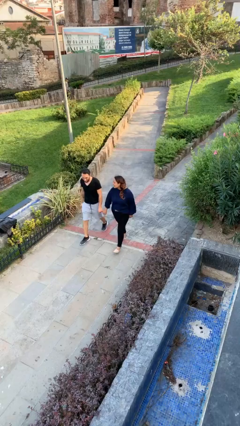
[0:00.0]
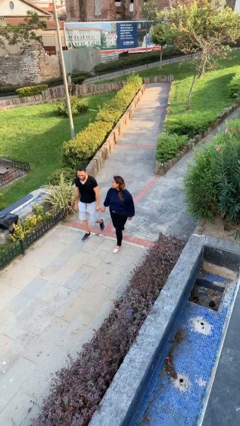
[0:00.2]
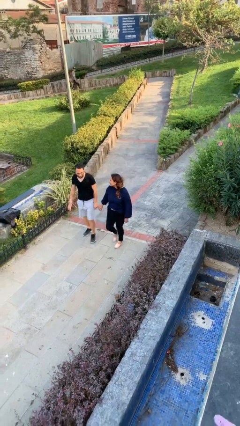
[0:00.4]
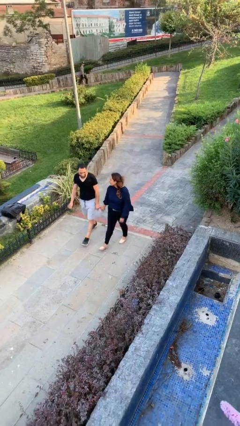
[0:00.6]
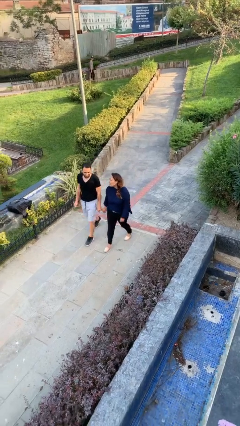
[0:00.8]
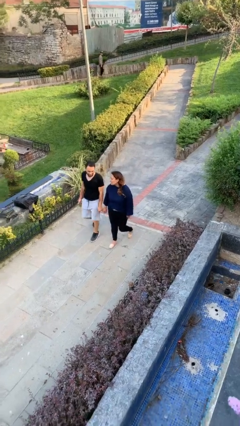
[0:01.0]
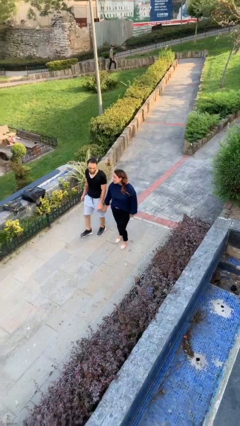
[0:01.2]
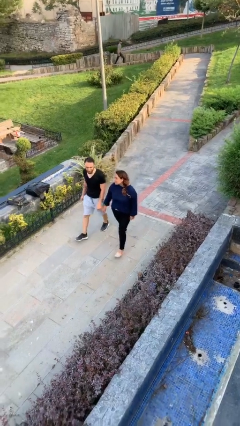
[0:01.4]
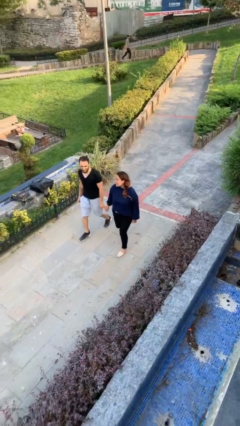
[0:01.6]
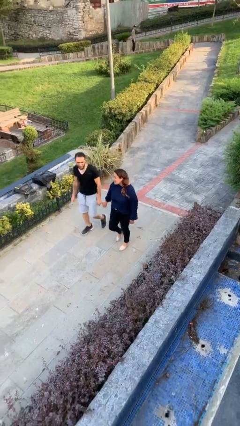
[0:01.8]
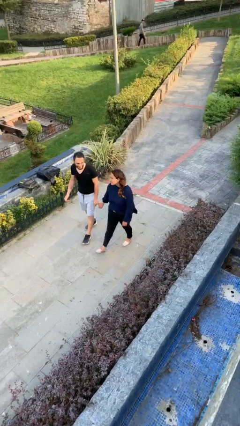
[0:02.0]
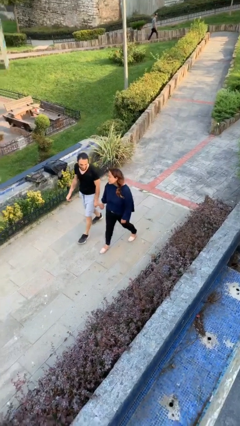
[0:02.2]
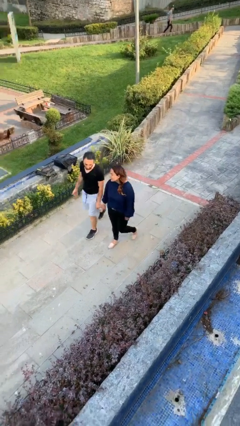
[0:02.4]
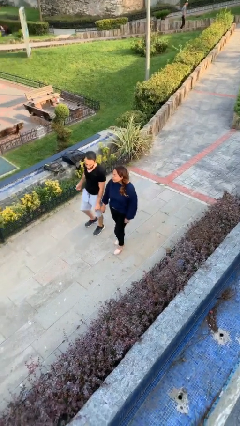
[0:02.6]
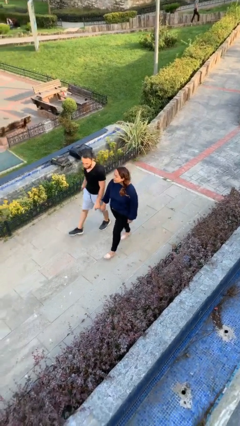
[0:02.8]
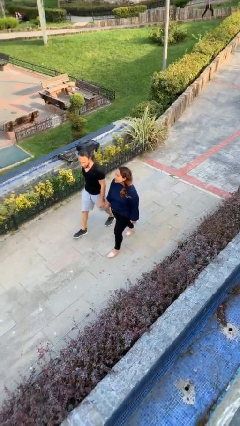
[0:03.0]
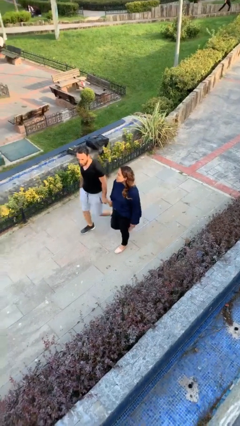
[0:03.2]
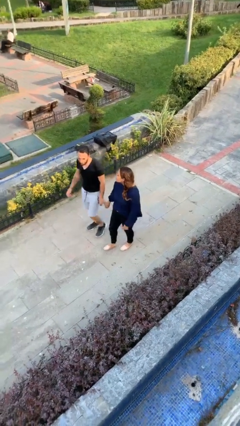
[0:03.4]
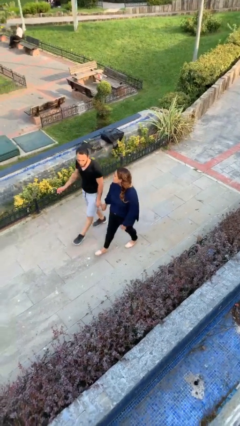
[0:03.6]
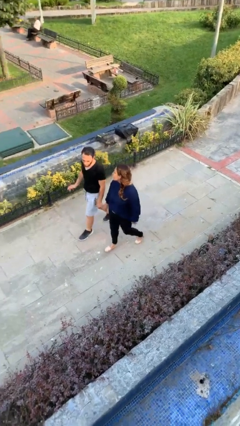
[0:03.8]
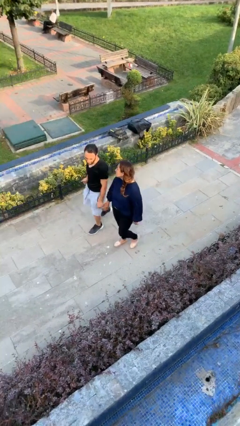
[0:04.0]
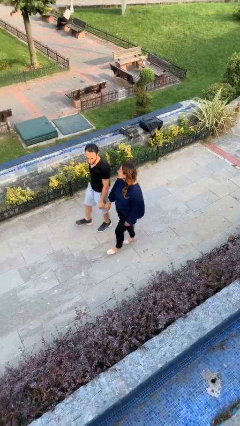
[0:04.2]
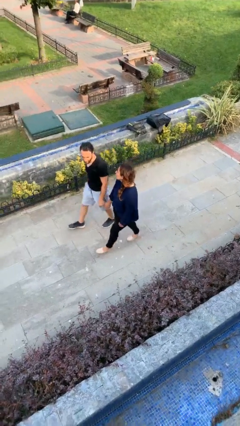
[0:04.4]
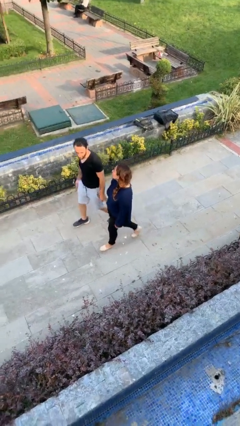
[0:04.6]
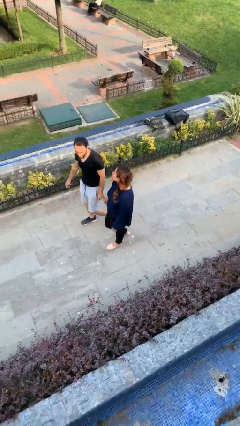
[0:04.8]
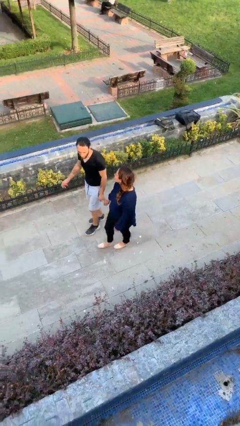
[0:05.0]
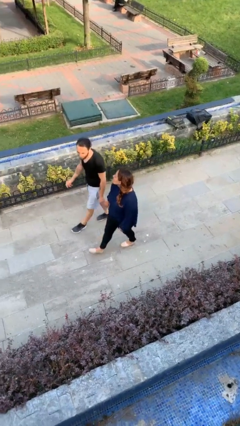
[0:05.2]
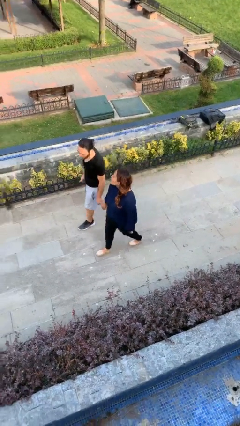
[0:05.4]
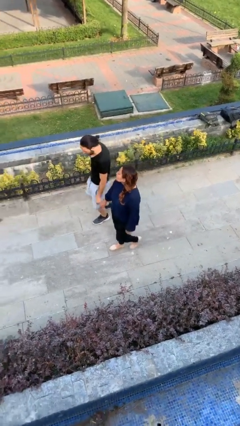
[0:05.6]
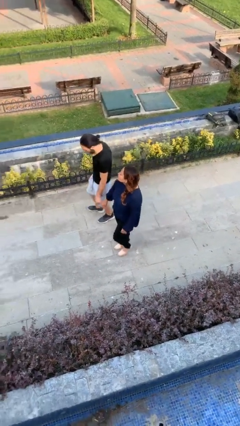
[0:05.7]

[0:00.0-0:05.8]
person holds hand

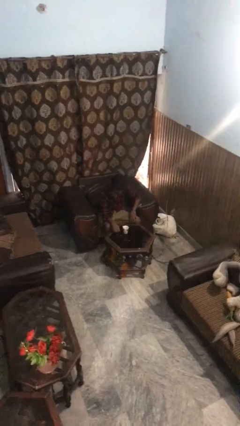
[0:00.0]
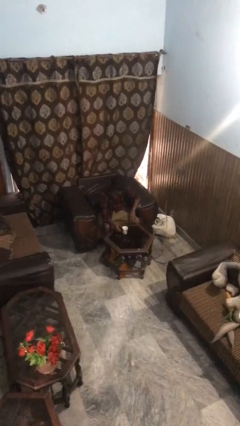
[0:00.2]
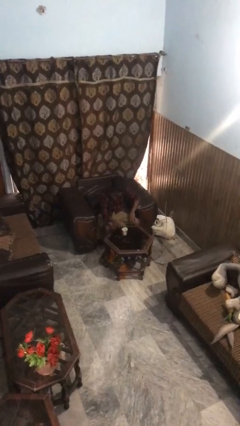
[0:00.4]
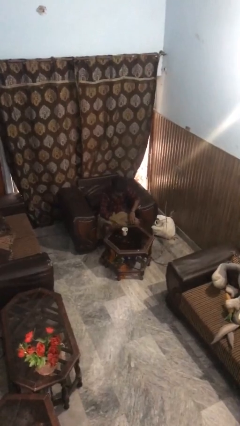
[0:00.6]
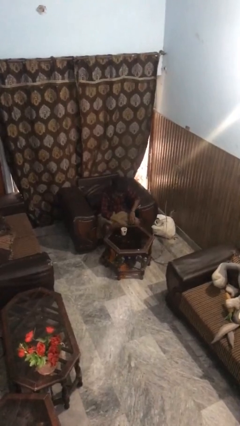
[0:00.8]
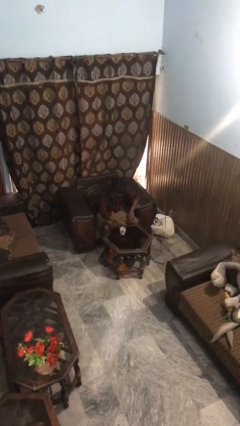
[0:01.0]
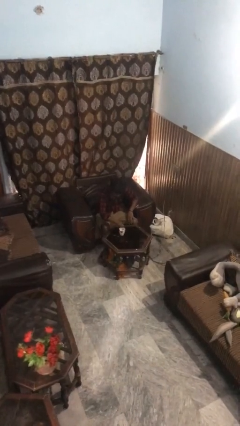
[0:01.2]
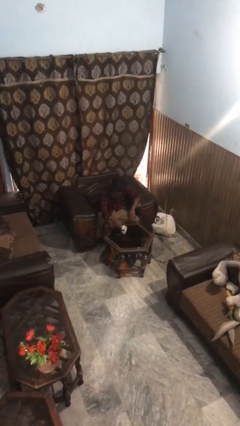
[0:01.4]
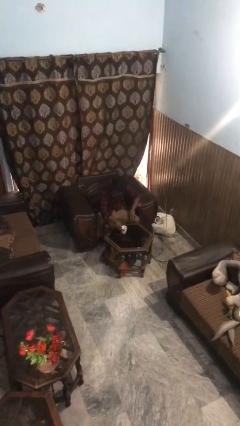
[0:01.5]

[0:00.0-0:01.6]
person stirs mug

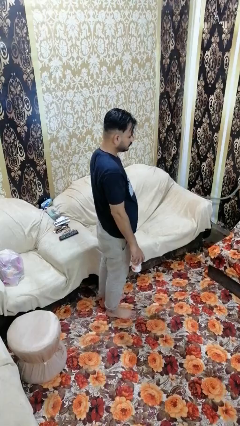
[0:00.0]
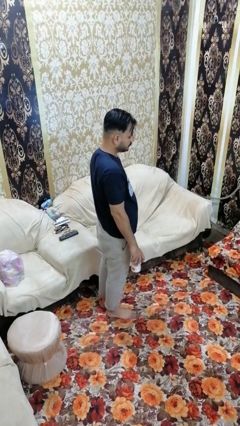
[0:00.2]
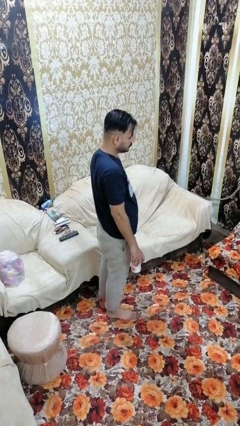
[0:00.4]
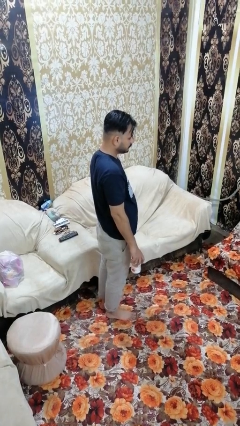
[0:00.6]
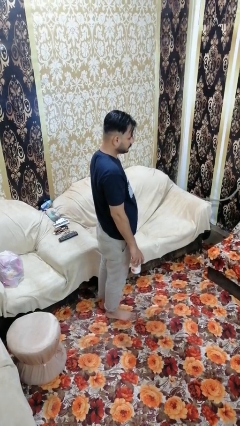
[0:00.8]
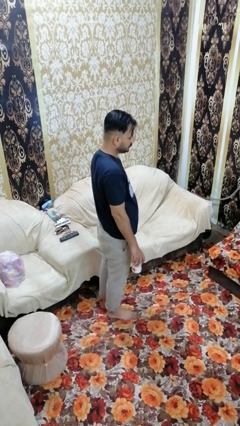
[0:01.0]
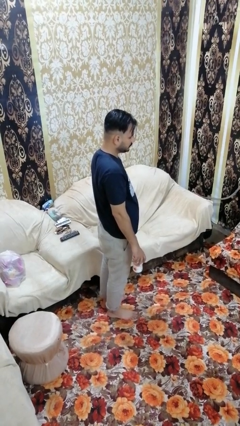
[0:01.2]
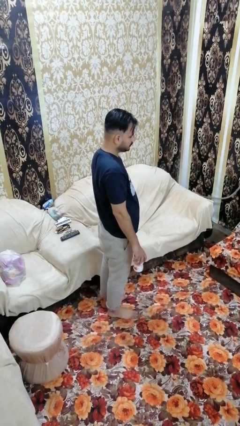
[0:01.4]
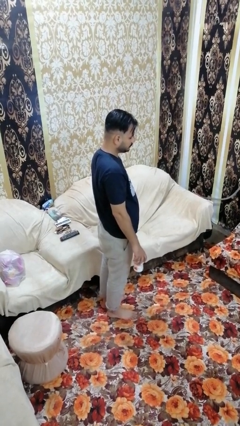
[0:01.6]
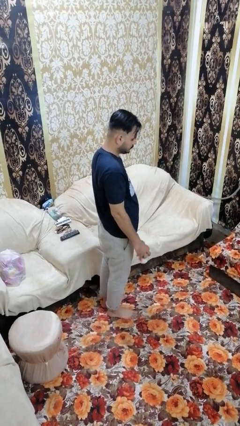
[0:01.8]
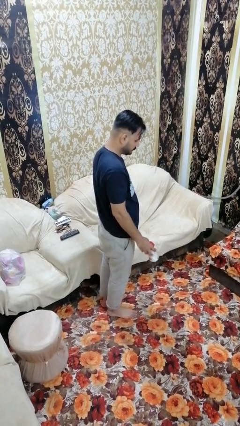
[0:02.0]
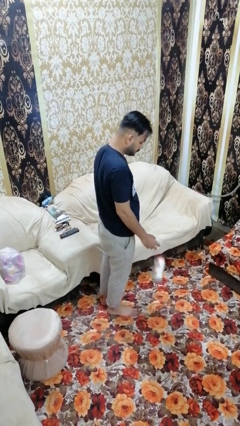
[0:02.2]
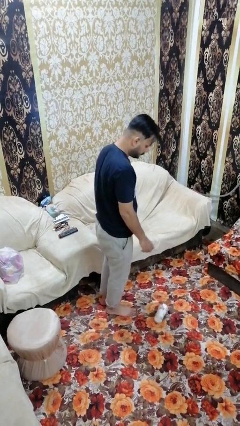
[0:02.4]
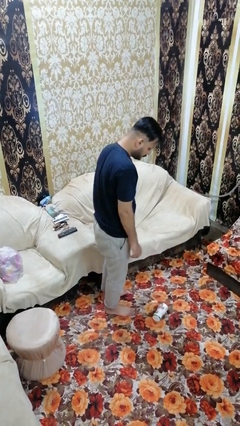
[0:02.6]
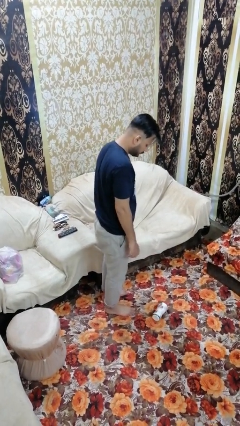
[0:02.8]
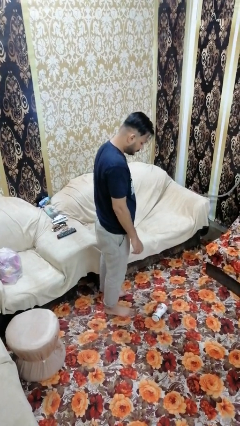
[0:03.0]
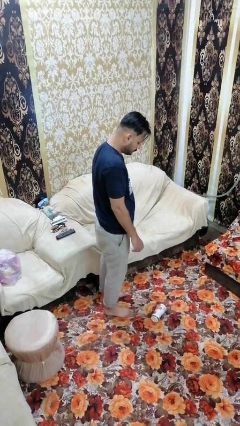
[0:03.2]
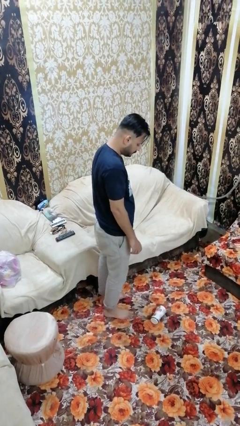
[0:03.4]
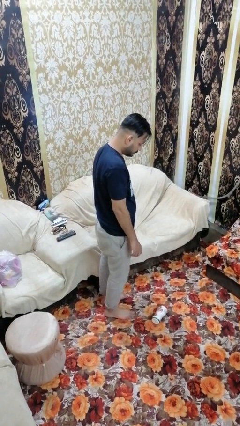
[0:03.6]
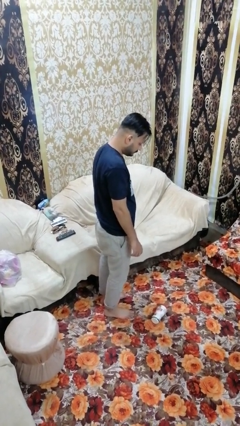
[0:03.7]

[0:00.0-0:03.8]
person drops object

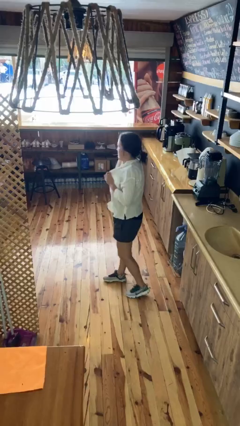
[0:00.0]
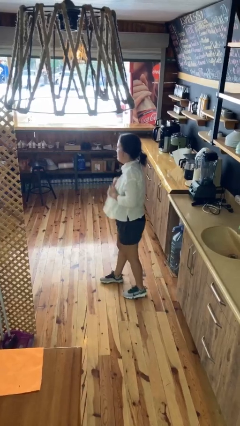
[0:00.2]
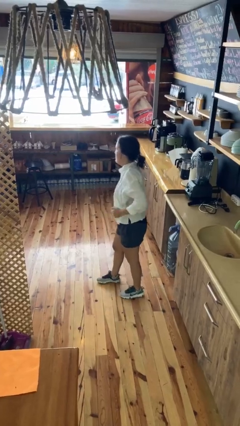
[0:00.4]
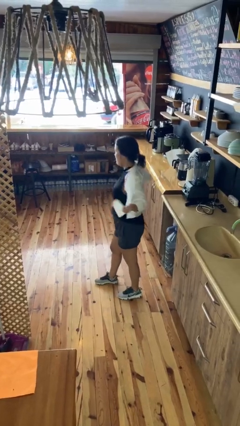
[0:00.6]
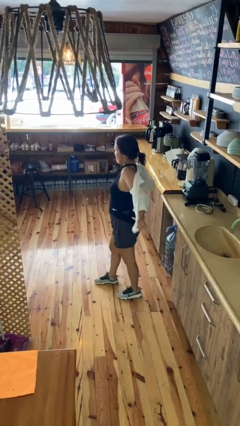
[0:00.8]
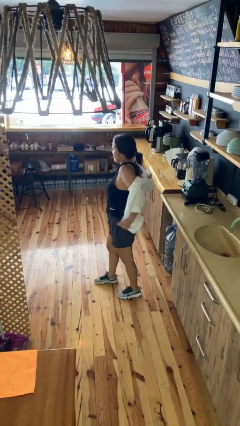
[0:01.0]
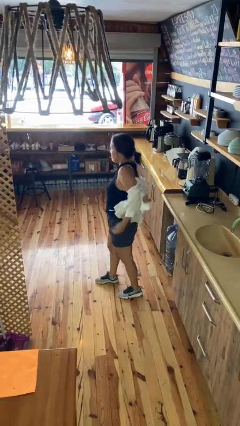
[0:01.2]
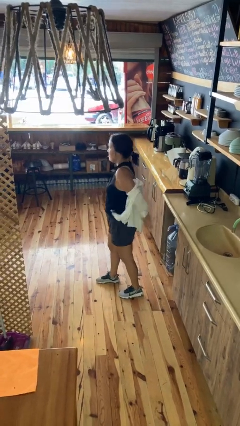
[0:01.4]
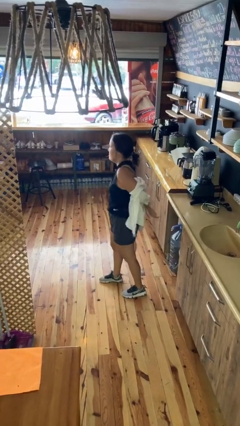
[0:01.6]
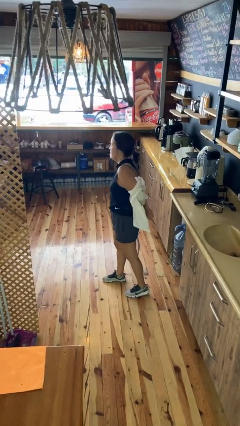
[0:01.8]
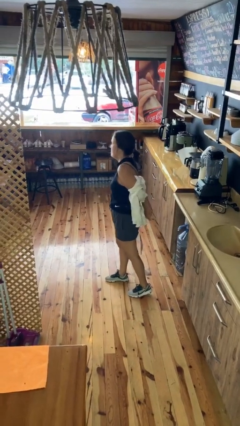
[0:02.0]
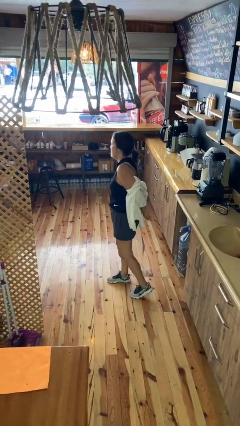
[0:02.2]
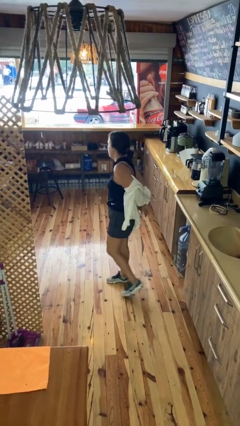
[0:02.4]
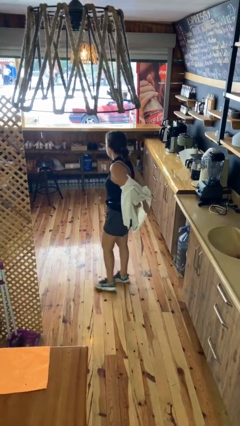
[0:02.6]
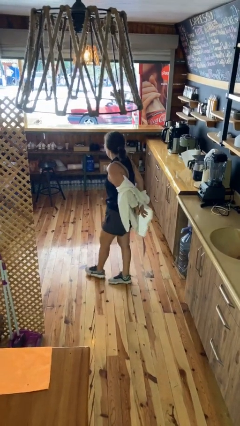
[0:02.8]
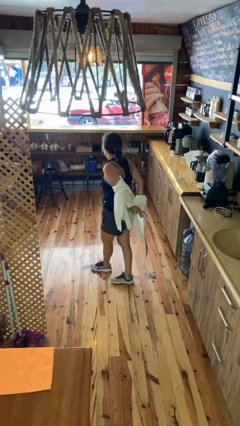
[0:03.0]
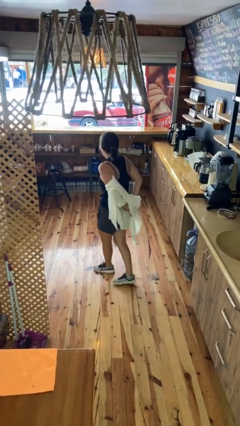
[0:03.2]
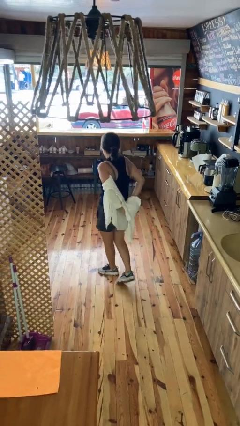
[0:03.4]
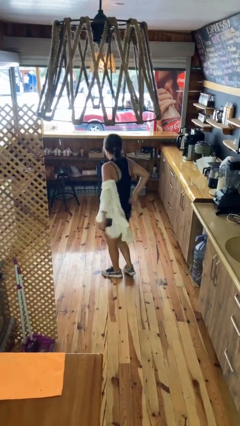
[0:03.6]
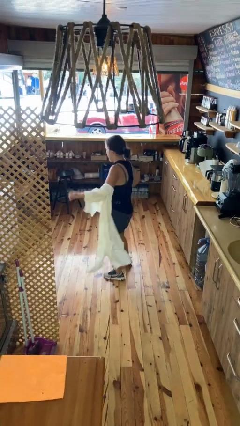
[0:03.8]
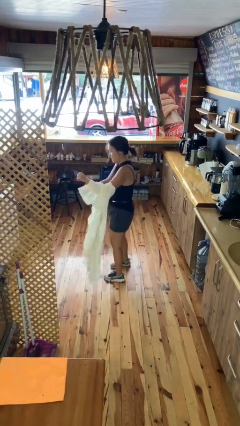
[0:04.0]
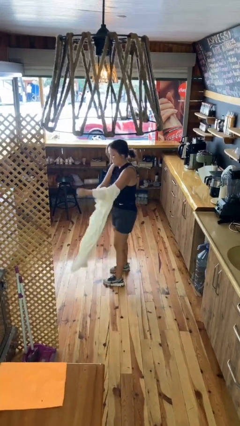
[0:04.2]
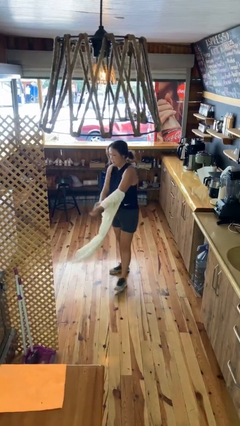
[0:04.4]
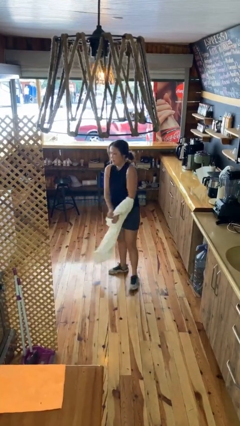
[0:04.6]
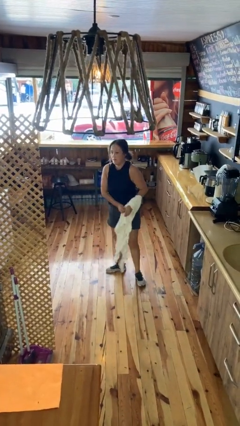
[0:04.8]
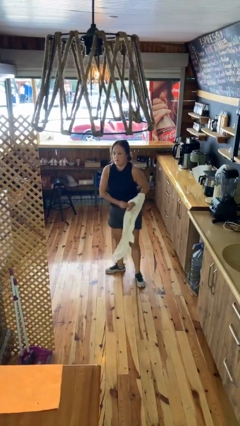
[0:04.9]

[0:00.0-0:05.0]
person takes off shirt

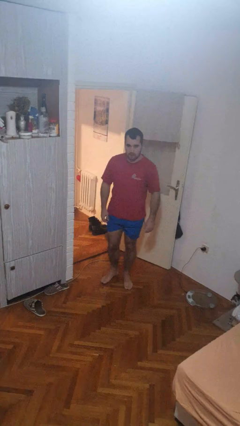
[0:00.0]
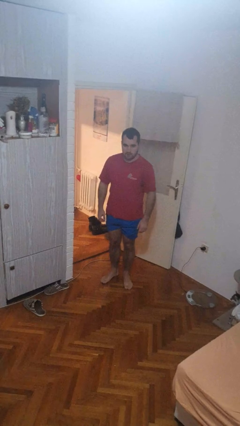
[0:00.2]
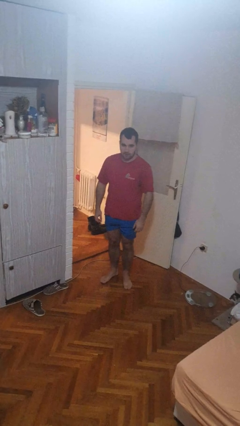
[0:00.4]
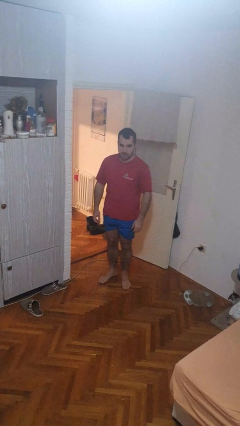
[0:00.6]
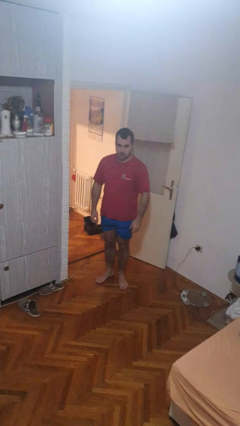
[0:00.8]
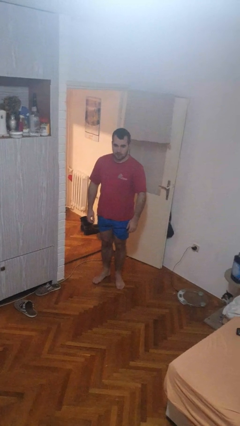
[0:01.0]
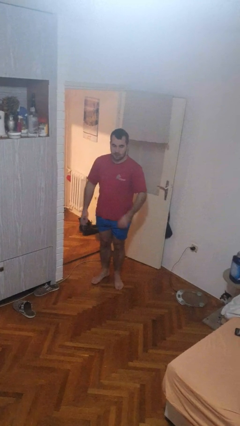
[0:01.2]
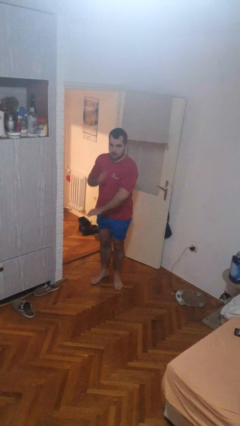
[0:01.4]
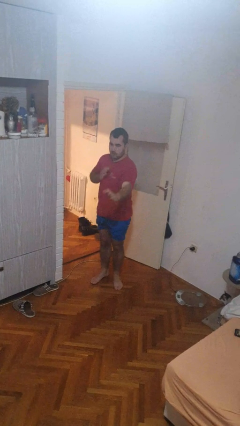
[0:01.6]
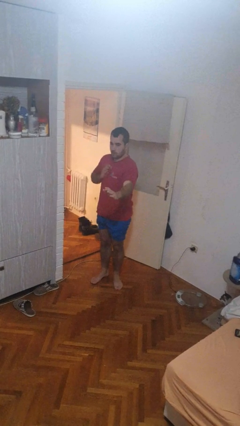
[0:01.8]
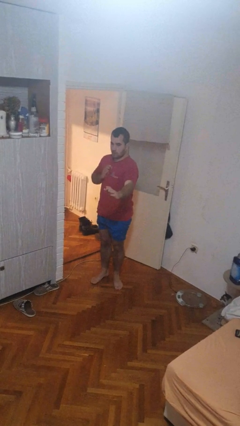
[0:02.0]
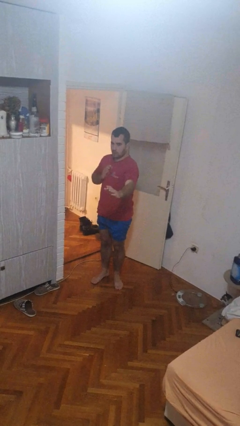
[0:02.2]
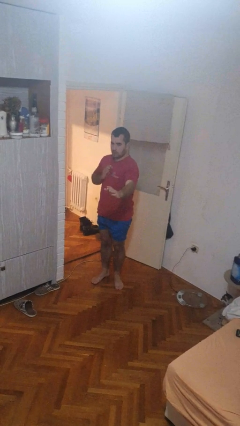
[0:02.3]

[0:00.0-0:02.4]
person karate chop
